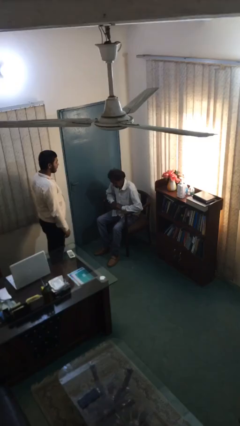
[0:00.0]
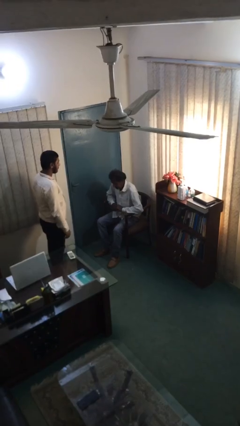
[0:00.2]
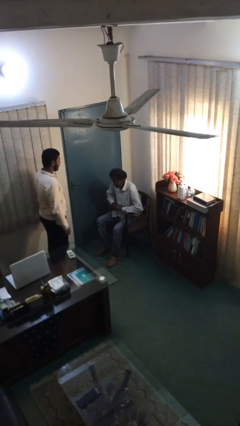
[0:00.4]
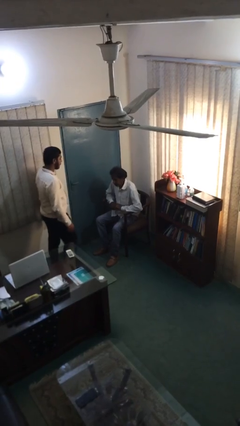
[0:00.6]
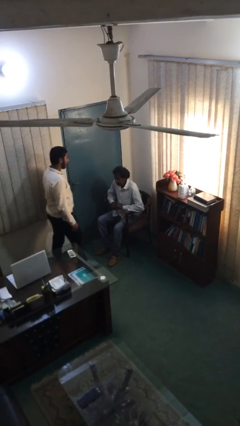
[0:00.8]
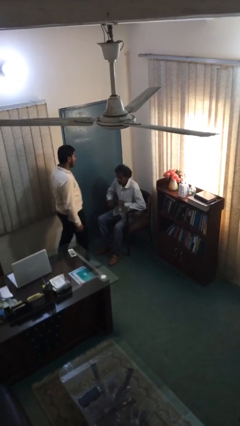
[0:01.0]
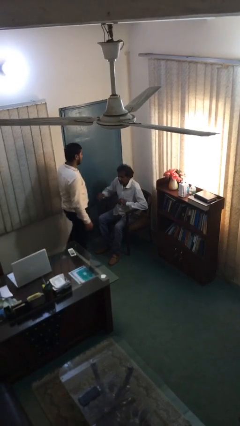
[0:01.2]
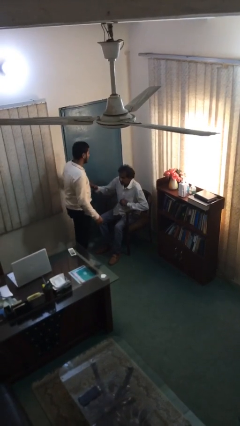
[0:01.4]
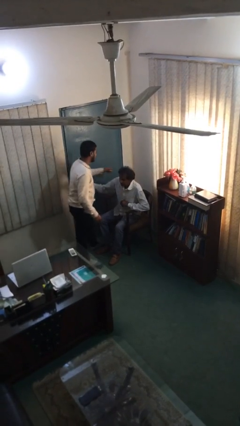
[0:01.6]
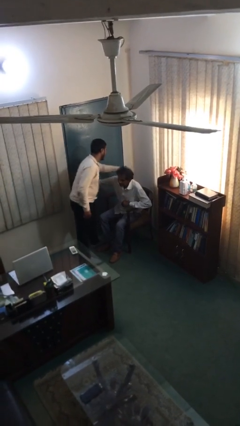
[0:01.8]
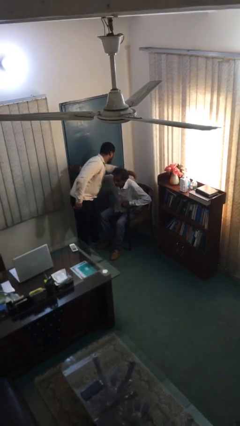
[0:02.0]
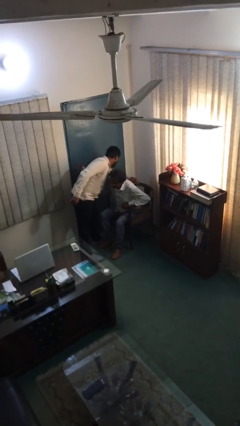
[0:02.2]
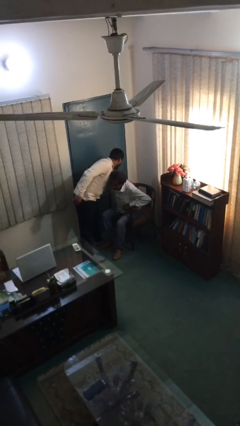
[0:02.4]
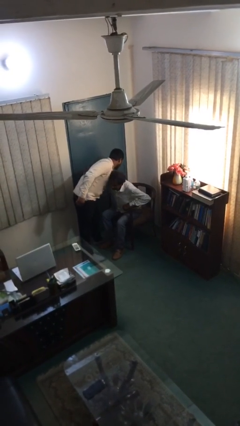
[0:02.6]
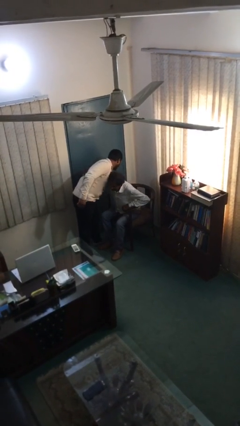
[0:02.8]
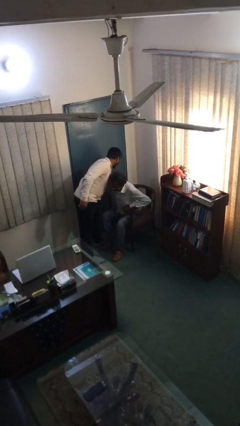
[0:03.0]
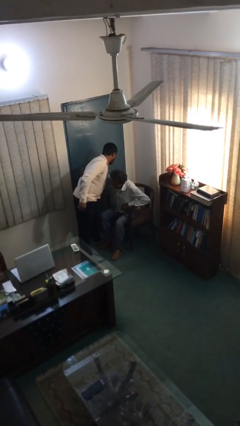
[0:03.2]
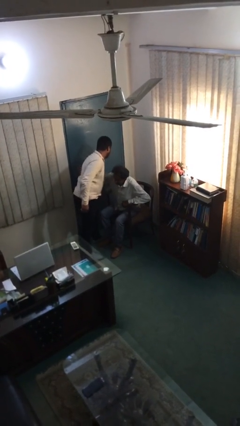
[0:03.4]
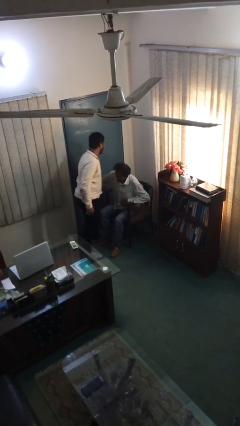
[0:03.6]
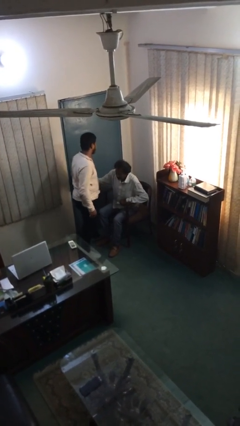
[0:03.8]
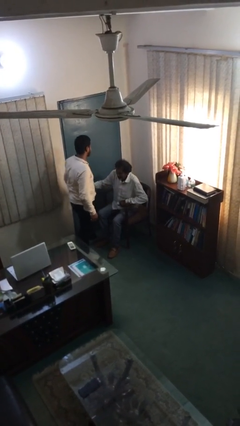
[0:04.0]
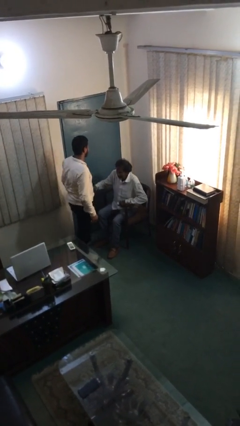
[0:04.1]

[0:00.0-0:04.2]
person embraces person

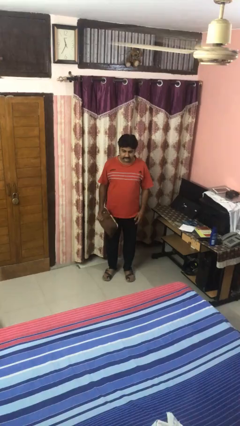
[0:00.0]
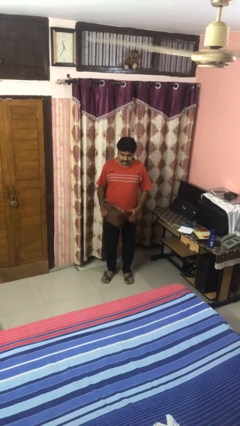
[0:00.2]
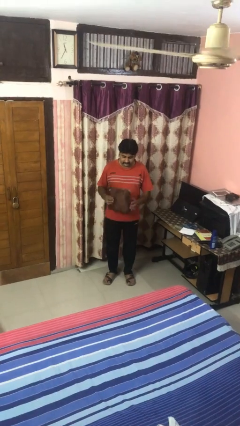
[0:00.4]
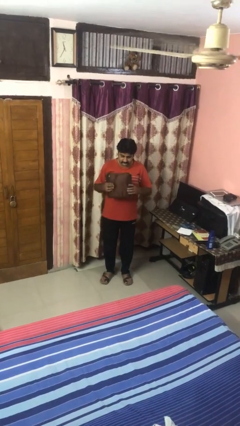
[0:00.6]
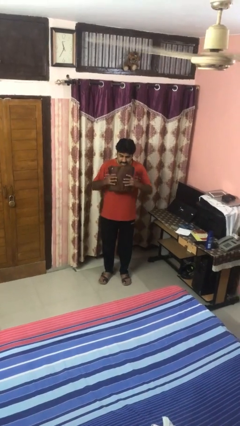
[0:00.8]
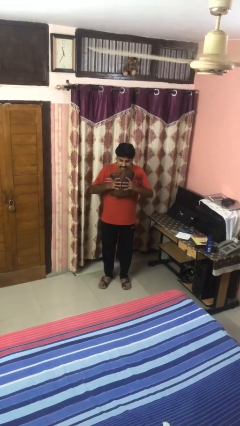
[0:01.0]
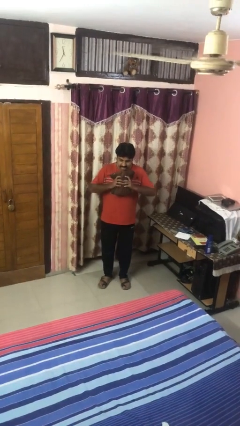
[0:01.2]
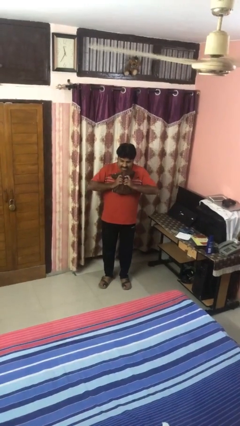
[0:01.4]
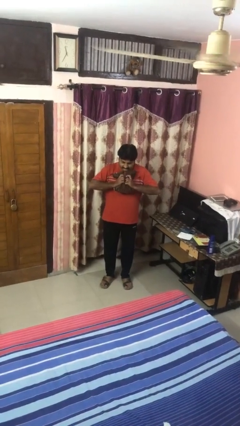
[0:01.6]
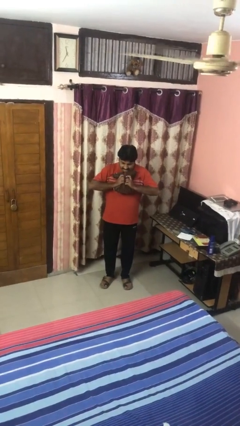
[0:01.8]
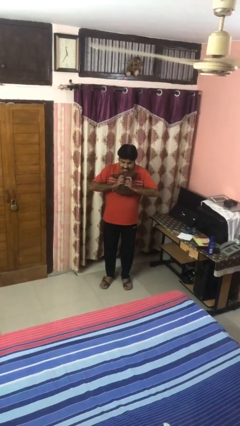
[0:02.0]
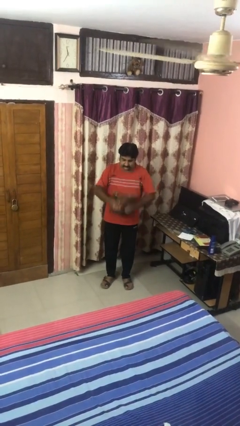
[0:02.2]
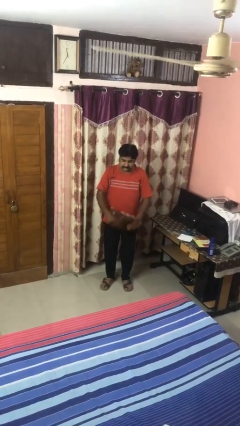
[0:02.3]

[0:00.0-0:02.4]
person squeezes object

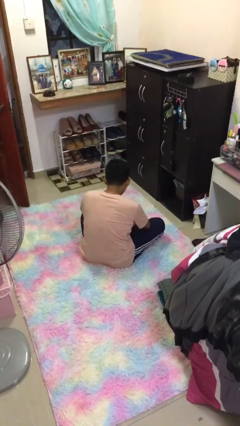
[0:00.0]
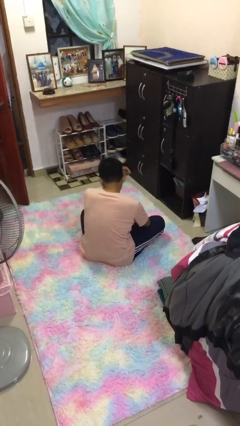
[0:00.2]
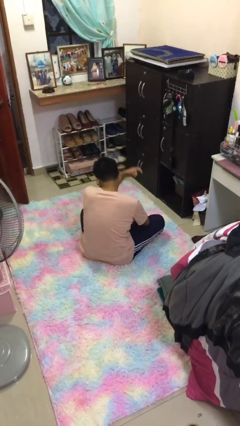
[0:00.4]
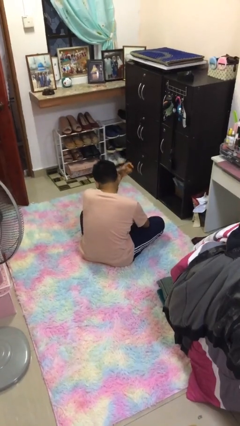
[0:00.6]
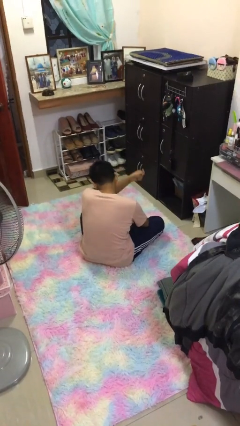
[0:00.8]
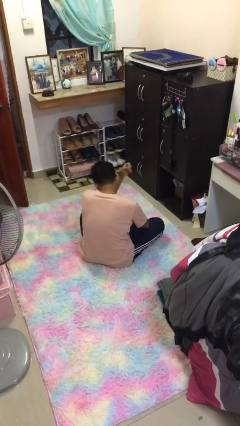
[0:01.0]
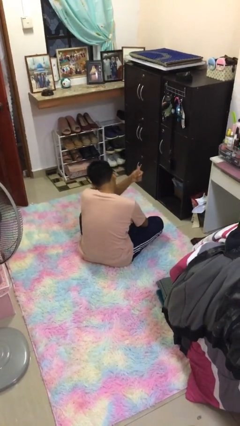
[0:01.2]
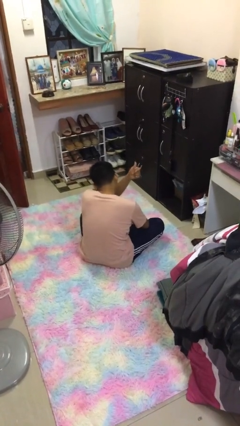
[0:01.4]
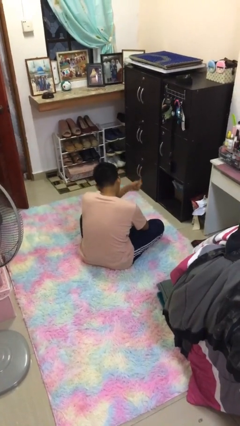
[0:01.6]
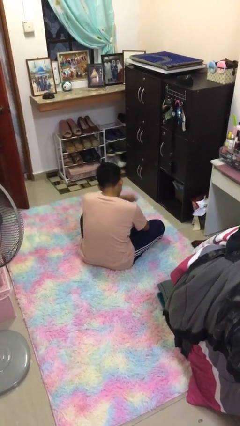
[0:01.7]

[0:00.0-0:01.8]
person snaps fingers

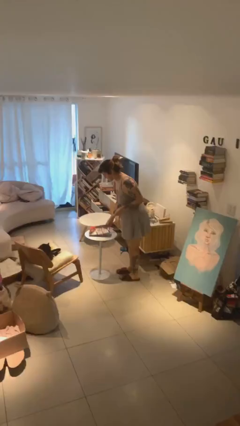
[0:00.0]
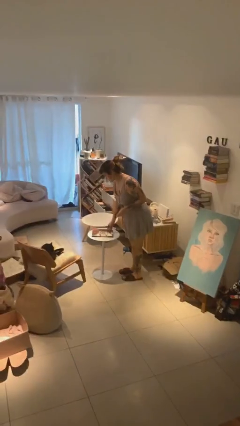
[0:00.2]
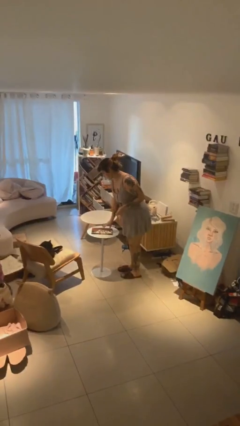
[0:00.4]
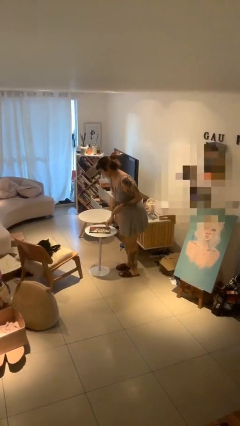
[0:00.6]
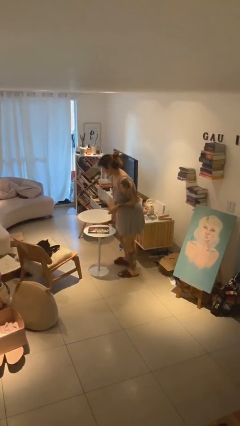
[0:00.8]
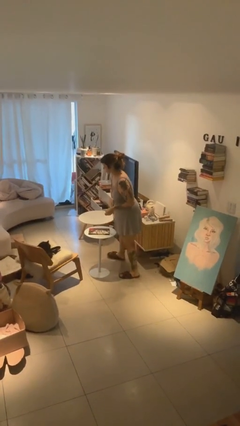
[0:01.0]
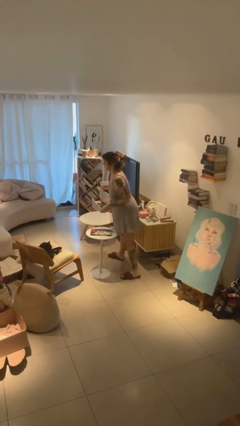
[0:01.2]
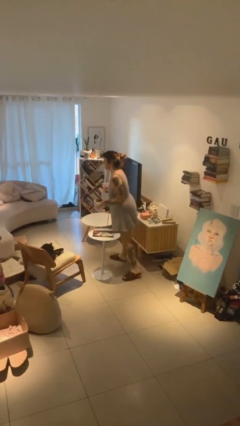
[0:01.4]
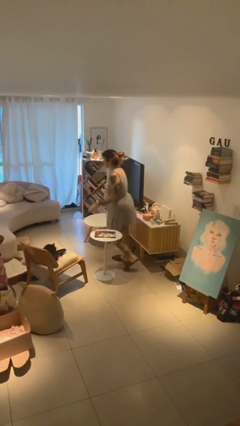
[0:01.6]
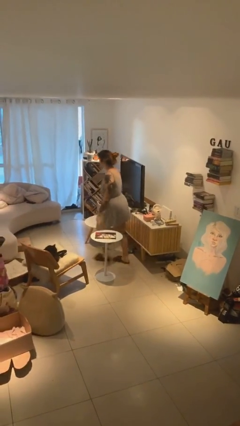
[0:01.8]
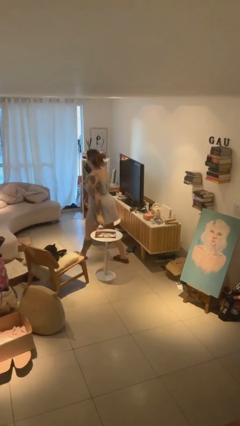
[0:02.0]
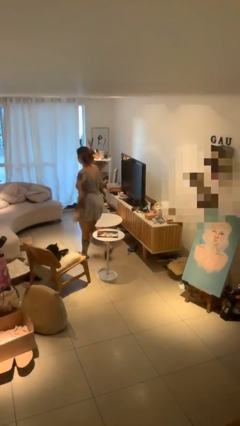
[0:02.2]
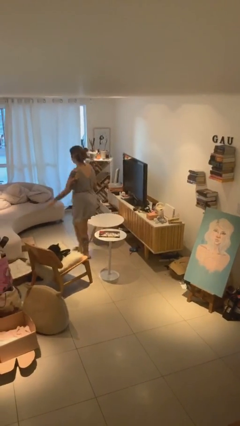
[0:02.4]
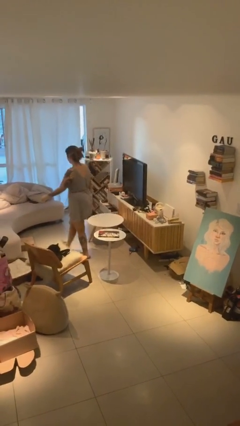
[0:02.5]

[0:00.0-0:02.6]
person puts down object on table

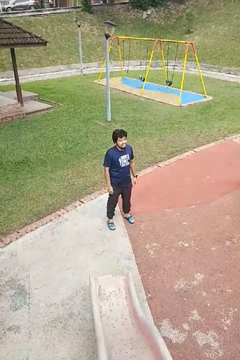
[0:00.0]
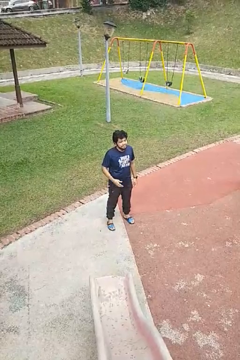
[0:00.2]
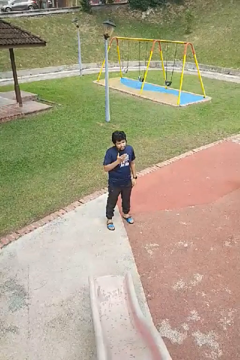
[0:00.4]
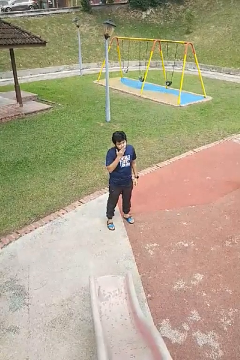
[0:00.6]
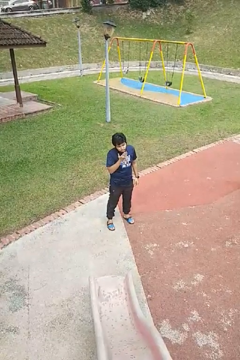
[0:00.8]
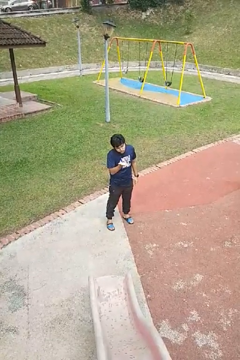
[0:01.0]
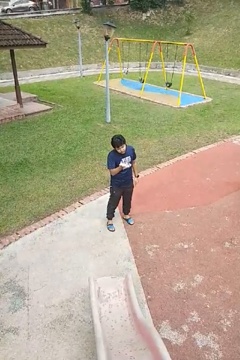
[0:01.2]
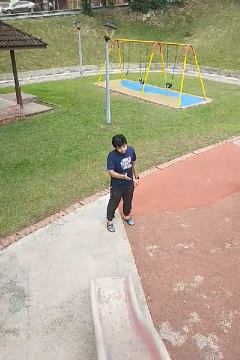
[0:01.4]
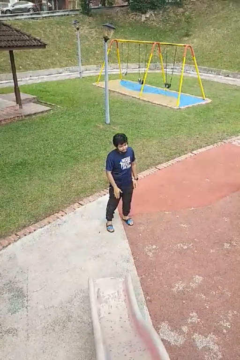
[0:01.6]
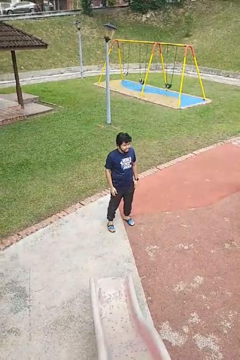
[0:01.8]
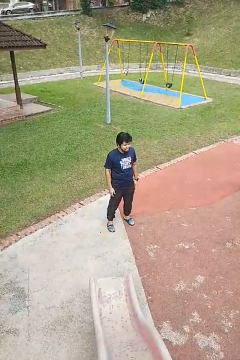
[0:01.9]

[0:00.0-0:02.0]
person gestures blow kiss

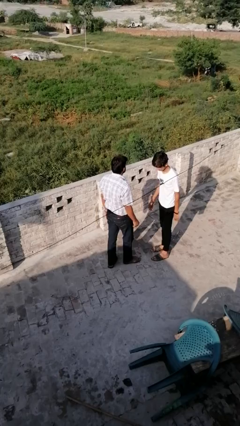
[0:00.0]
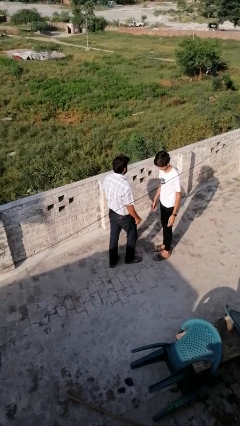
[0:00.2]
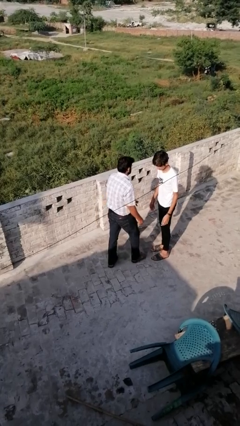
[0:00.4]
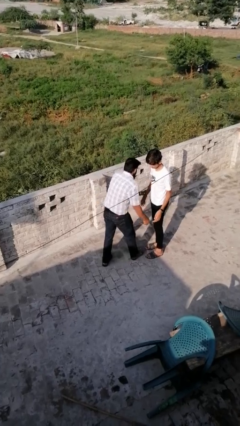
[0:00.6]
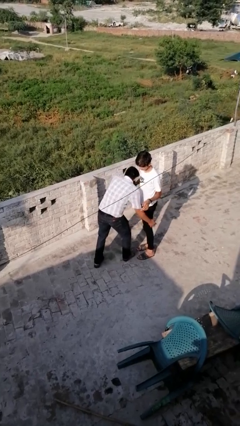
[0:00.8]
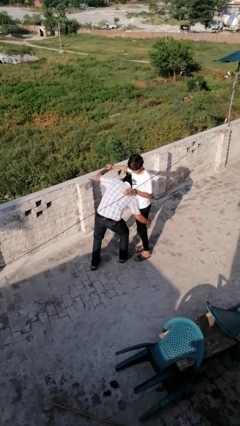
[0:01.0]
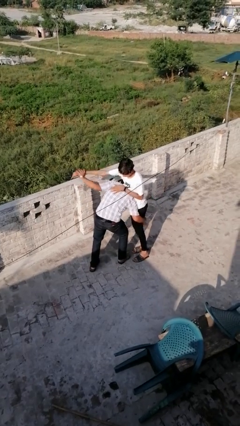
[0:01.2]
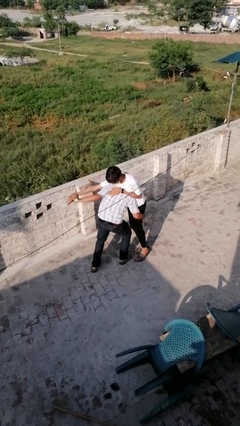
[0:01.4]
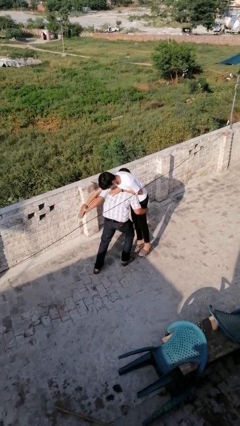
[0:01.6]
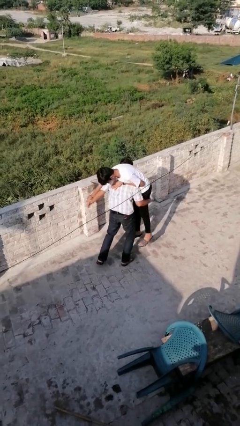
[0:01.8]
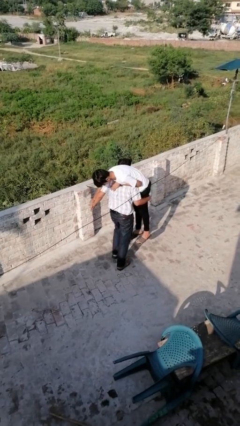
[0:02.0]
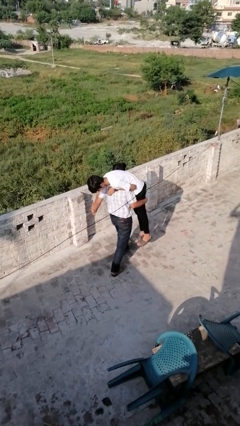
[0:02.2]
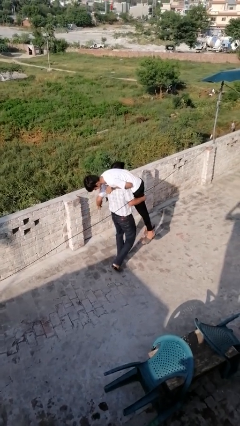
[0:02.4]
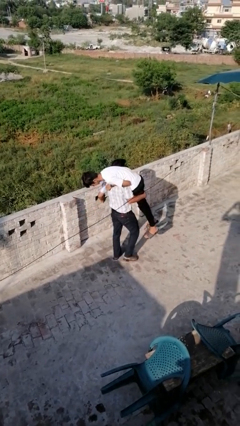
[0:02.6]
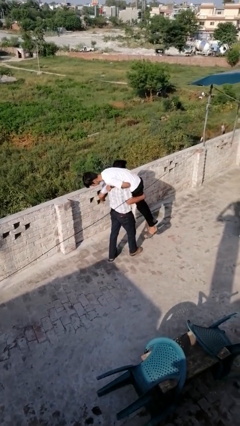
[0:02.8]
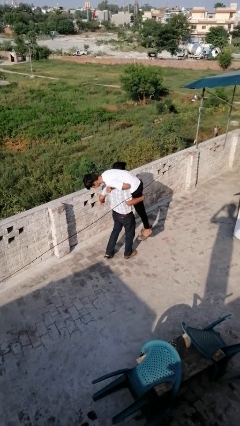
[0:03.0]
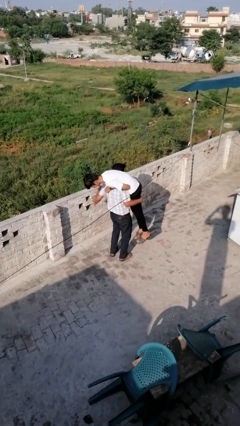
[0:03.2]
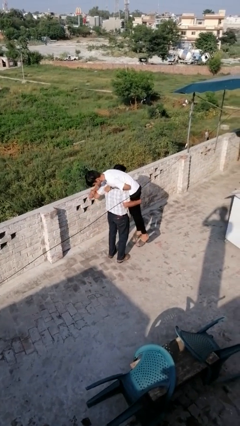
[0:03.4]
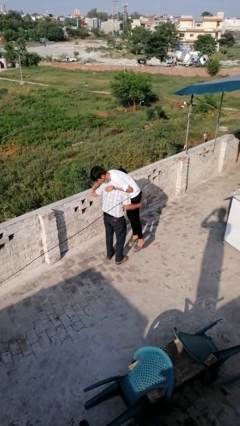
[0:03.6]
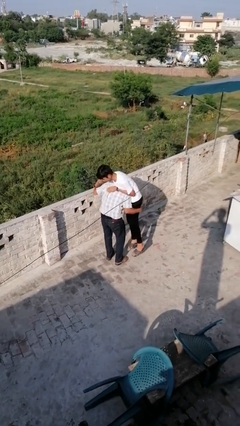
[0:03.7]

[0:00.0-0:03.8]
person carries person on shoulders

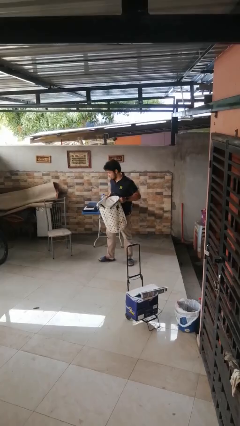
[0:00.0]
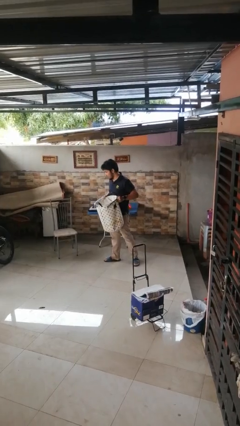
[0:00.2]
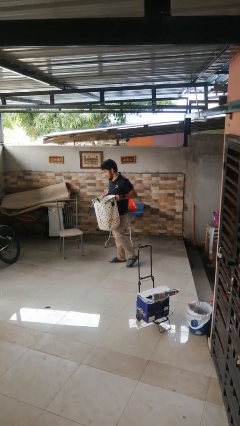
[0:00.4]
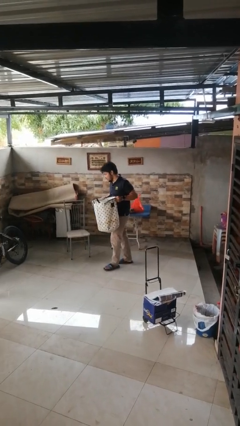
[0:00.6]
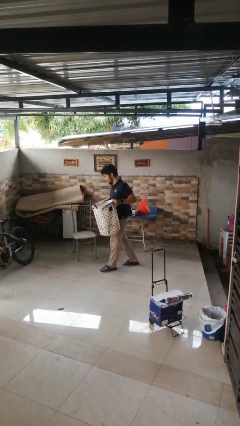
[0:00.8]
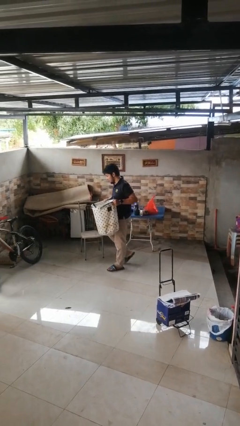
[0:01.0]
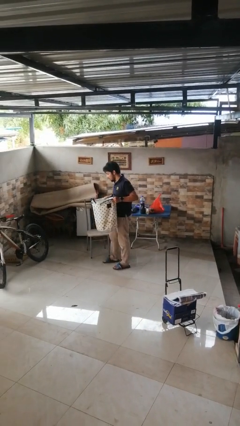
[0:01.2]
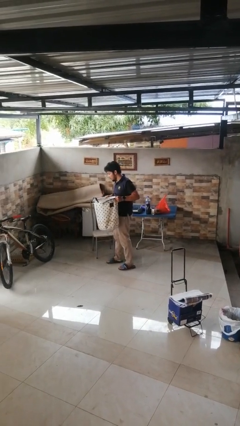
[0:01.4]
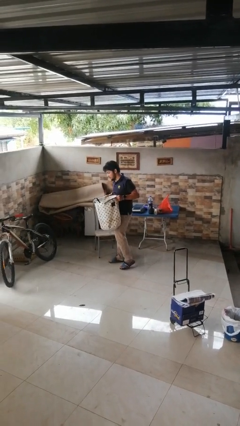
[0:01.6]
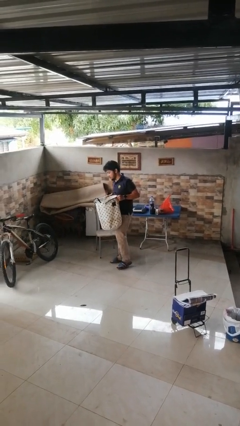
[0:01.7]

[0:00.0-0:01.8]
person carries laundry basket